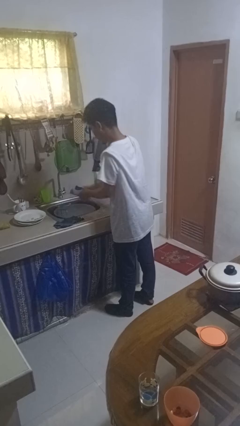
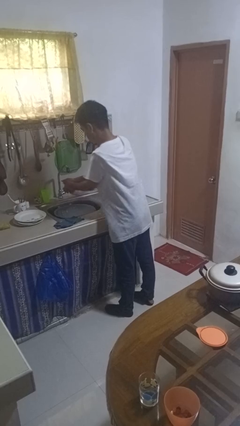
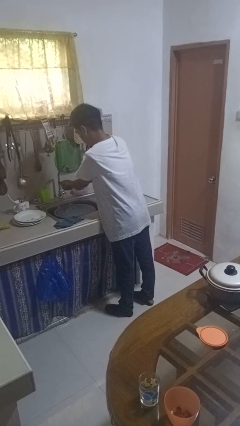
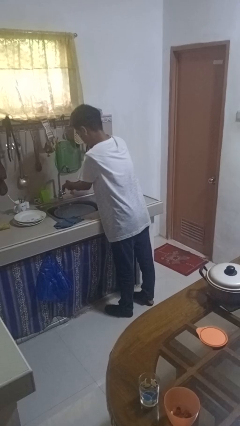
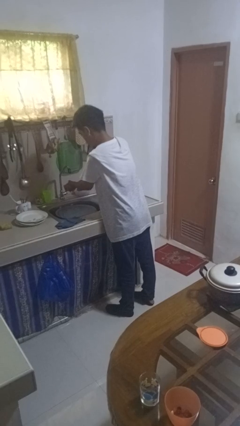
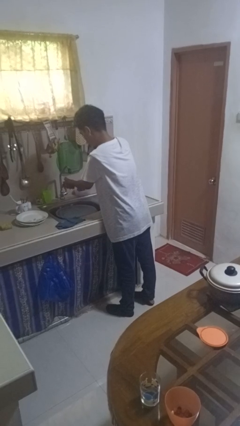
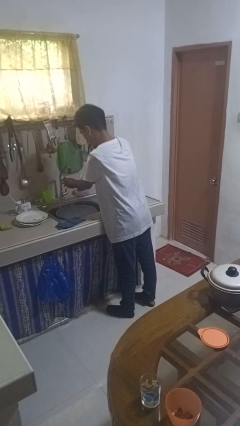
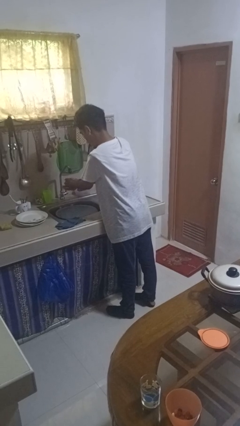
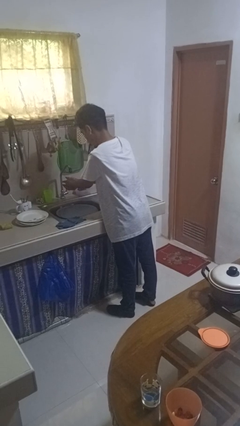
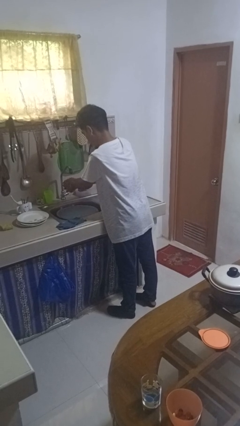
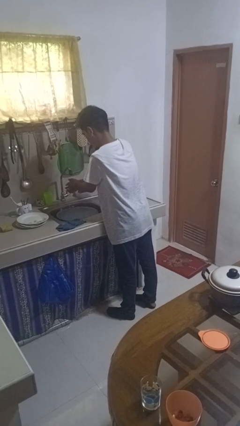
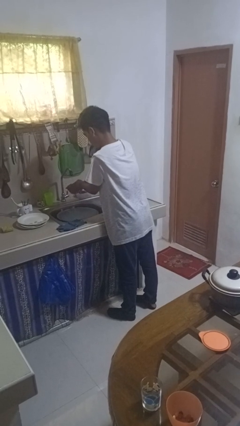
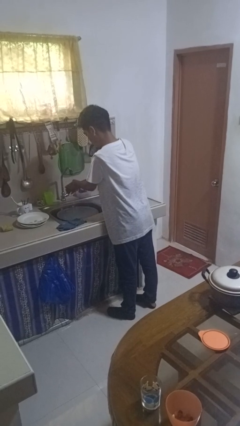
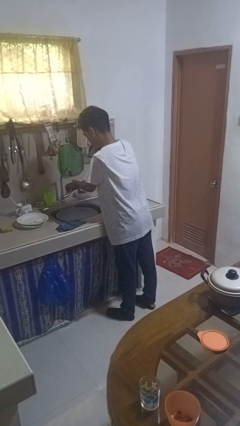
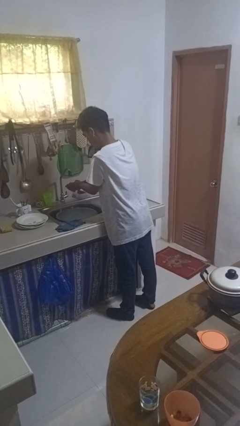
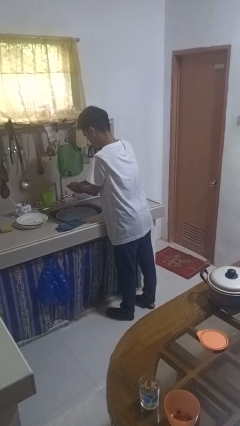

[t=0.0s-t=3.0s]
person washes hands

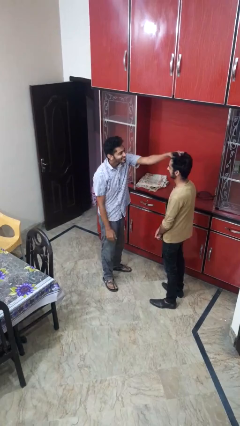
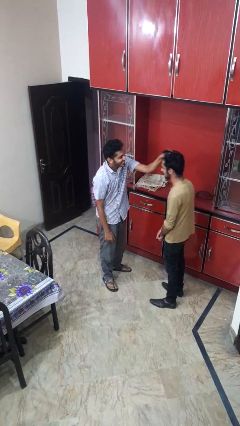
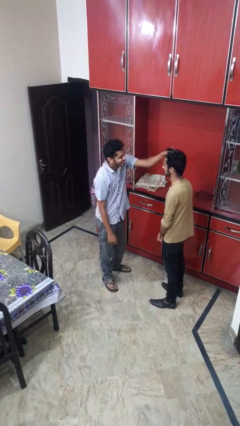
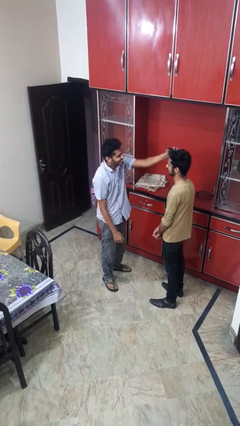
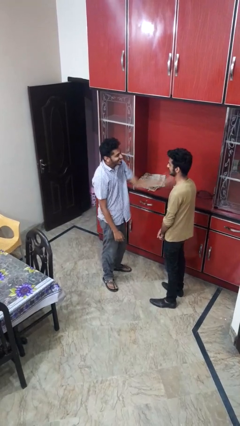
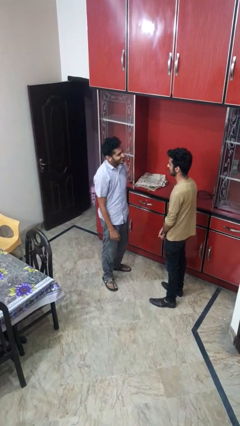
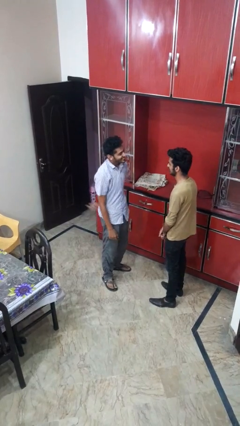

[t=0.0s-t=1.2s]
person grabs person by hair

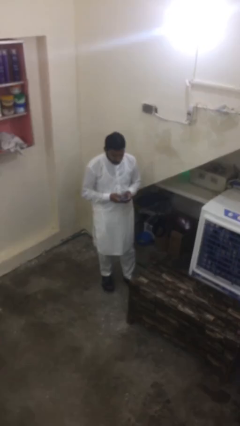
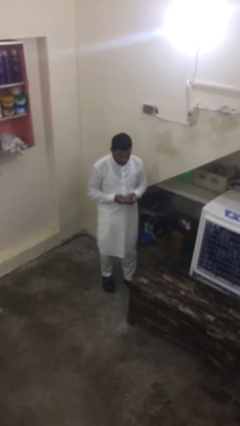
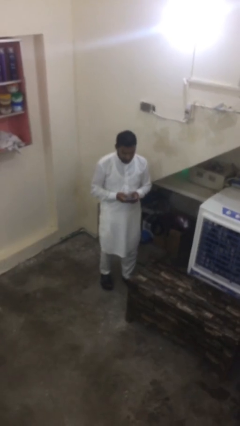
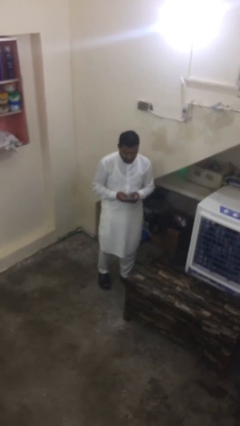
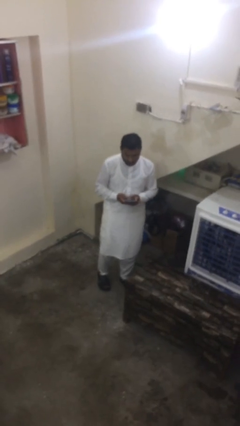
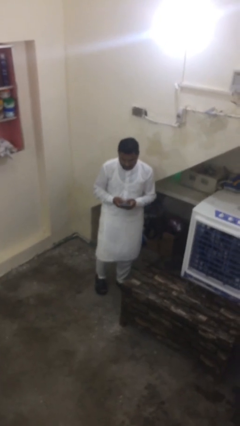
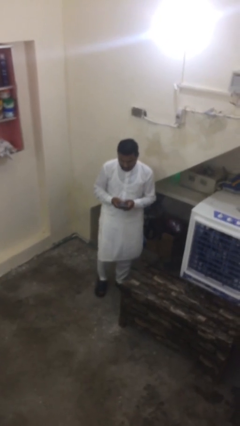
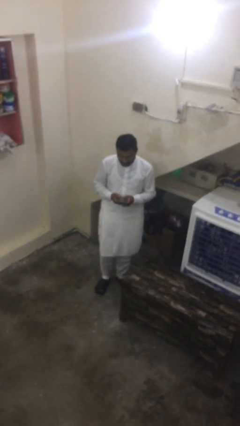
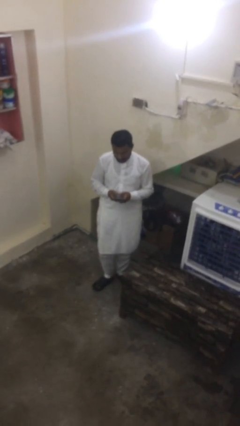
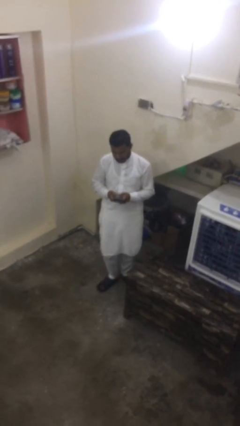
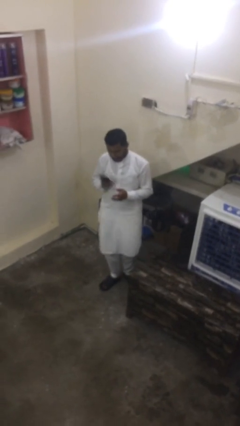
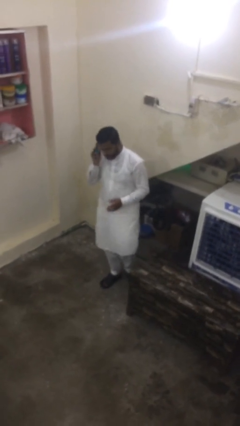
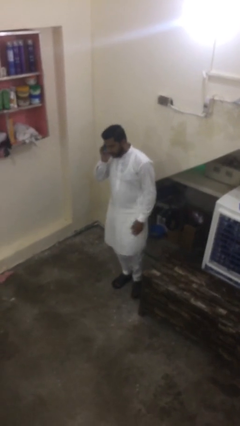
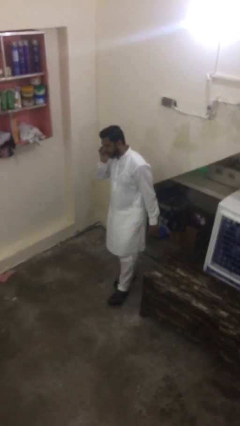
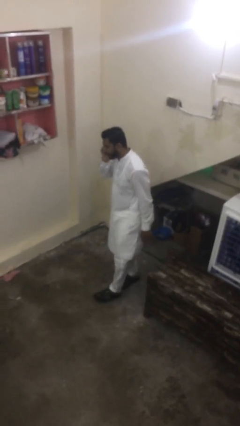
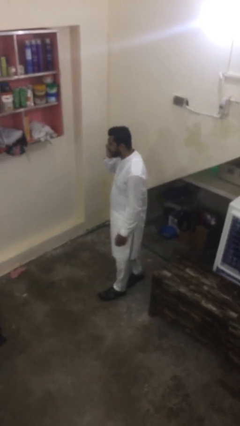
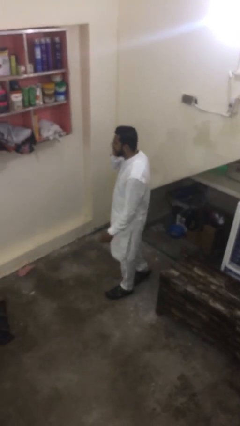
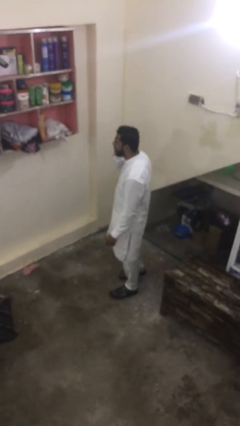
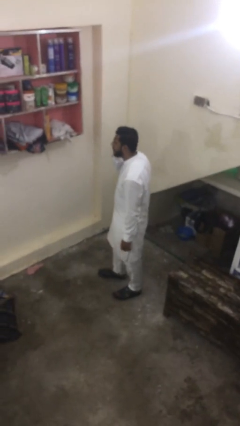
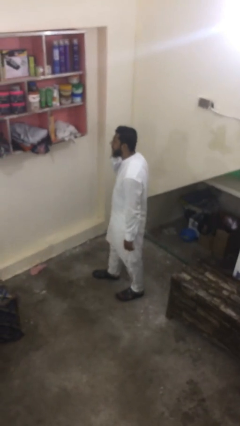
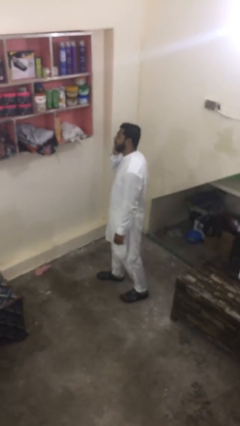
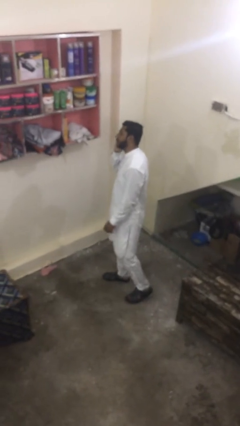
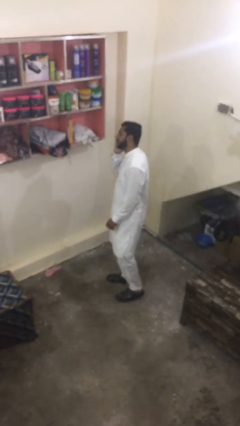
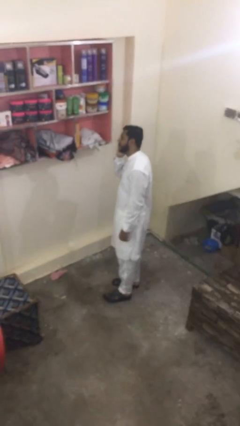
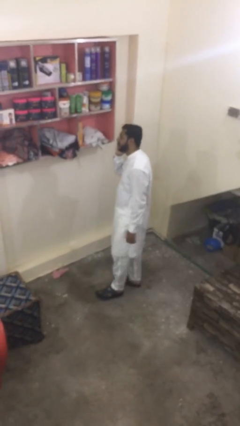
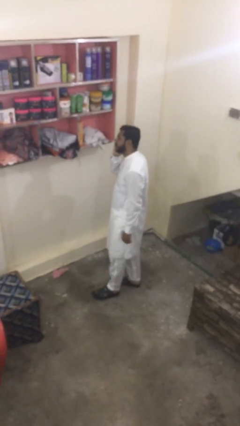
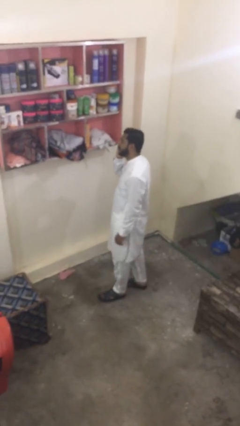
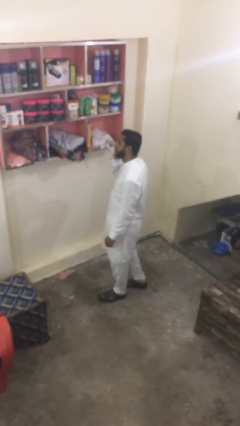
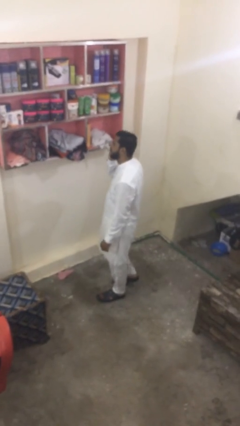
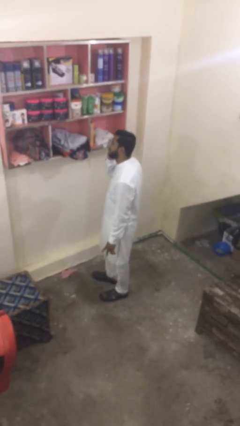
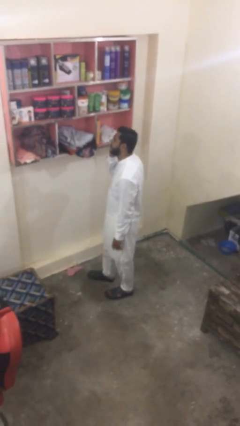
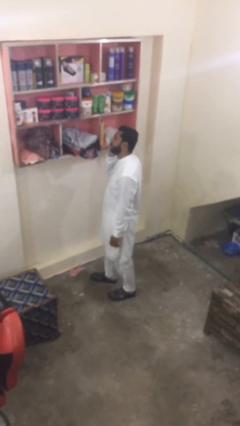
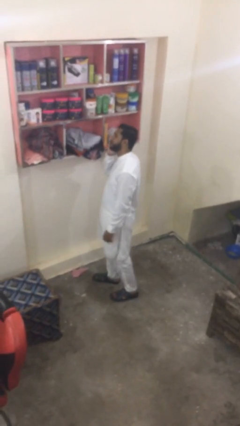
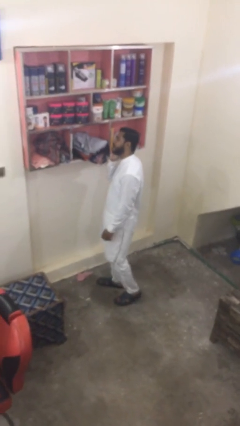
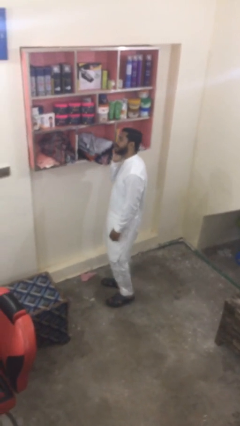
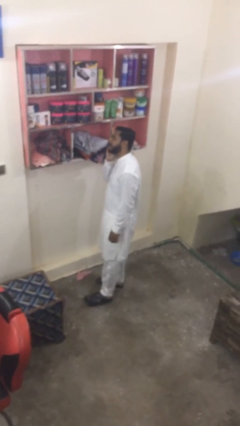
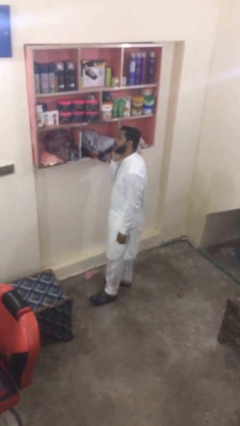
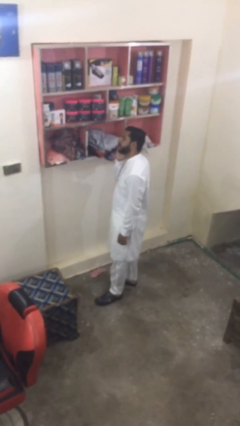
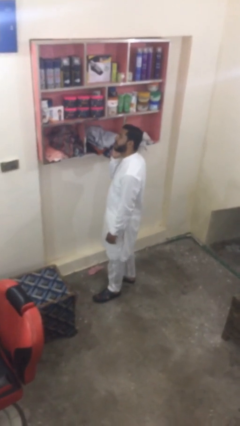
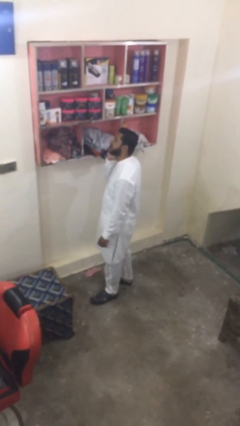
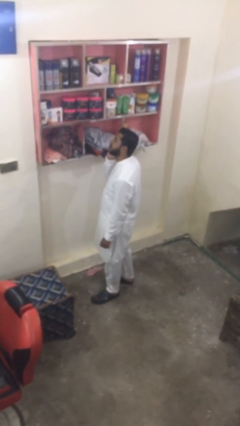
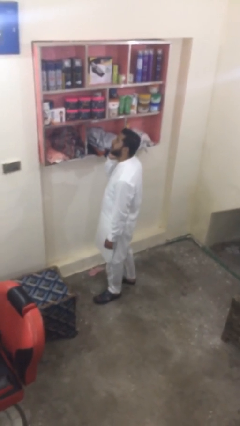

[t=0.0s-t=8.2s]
person talks on phone

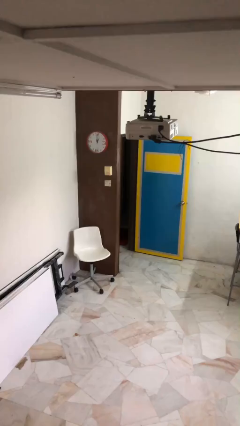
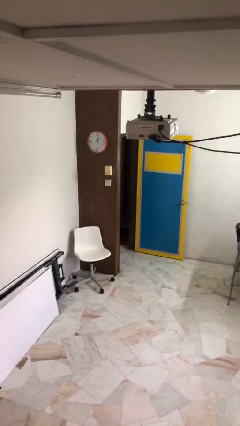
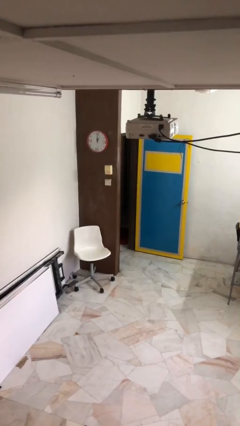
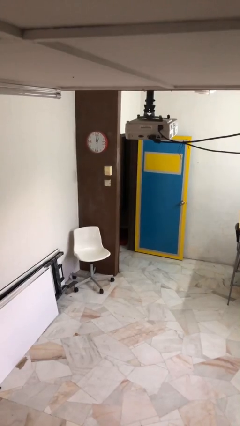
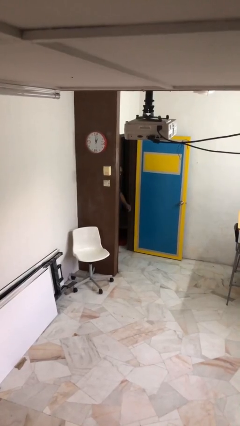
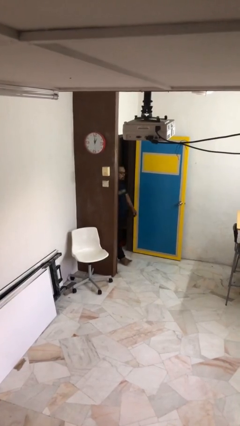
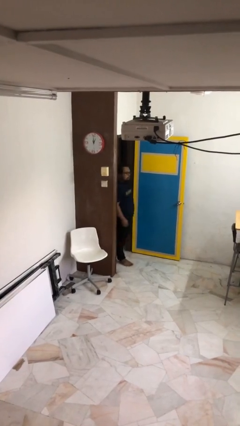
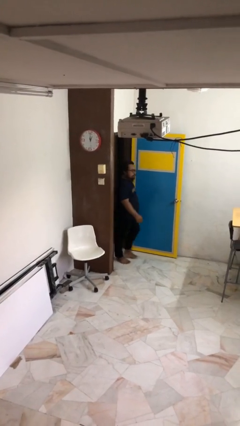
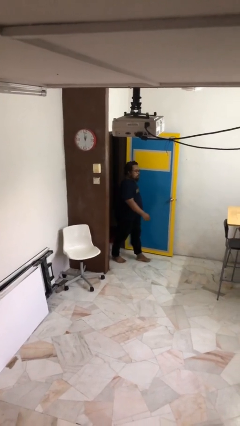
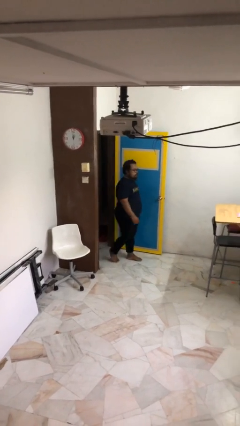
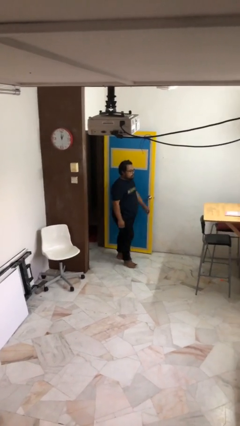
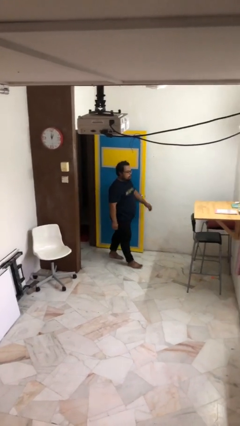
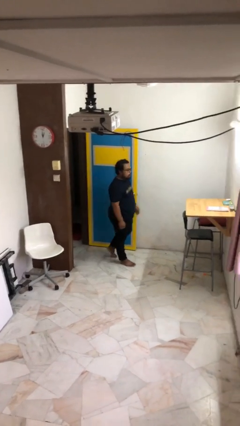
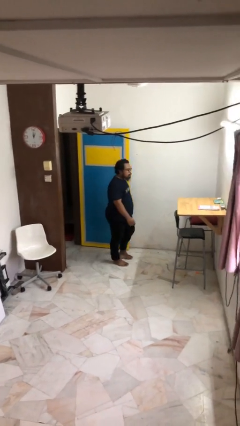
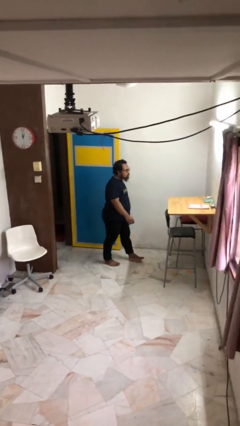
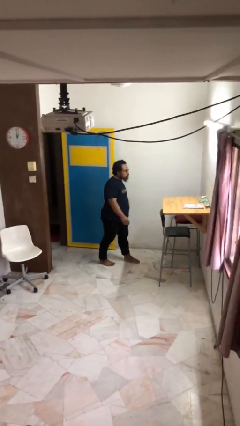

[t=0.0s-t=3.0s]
person enters scene through structure

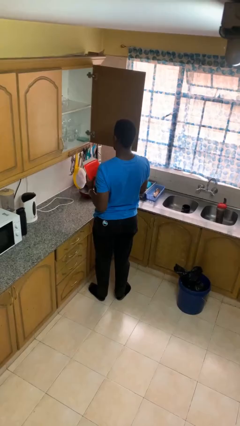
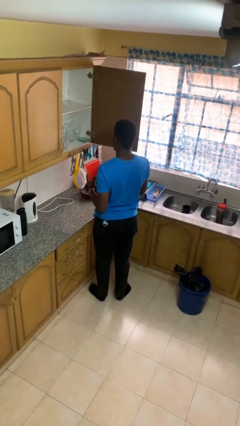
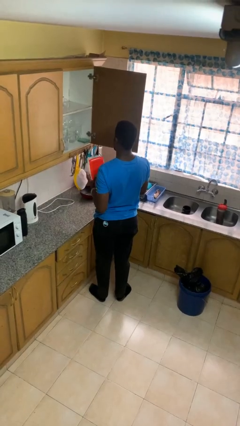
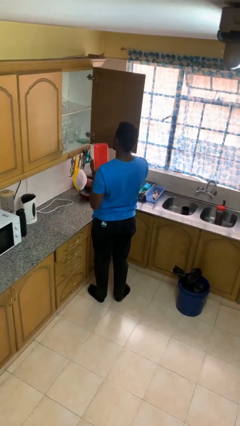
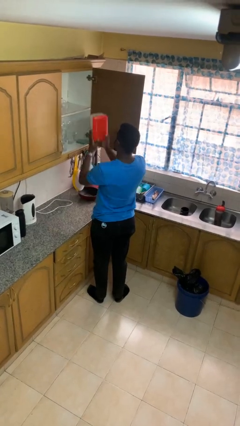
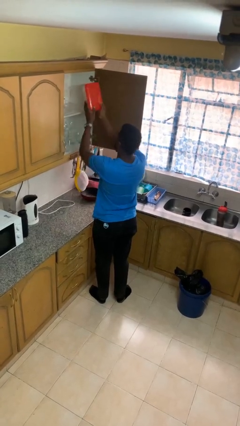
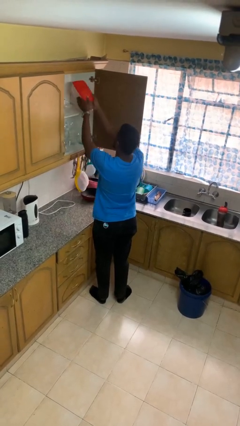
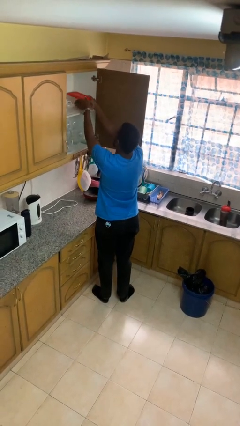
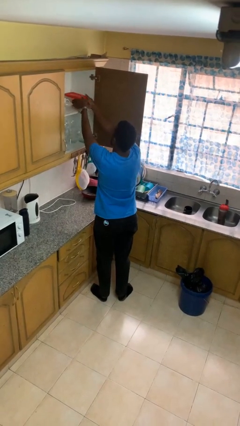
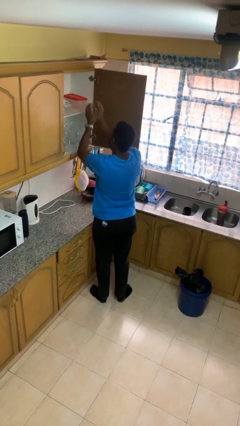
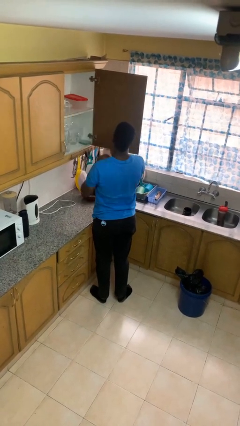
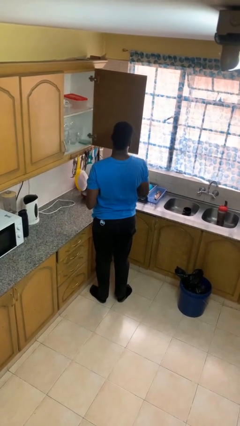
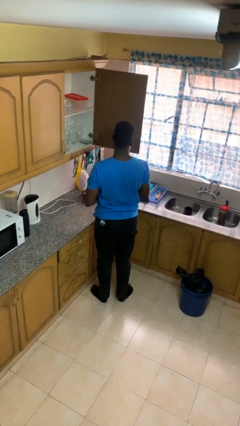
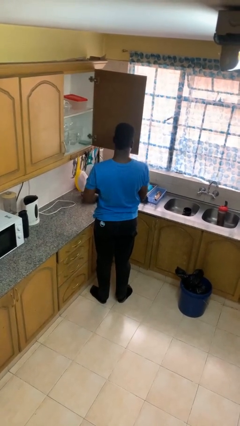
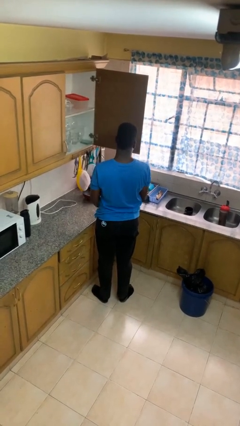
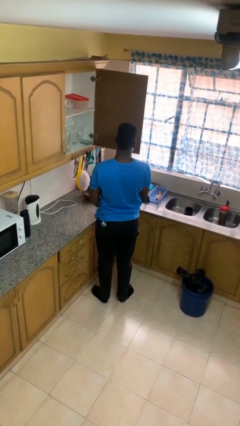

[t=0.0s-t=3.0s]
person puts down object into cabinet
